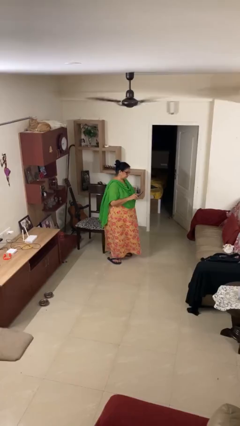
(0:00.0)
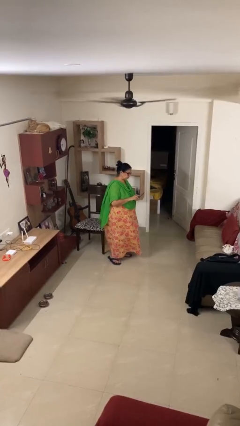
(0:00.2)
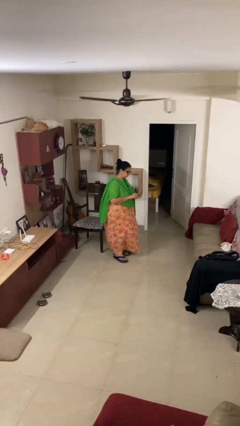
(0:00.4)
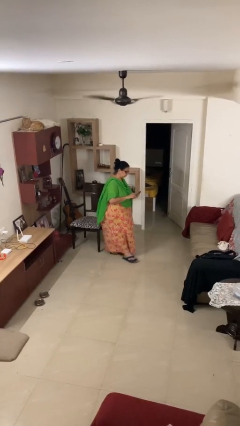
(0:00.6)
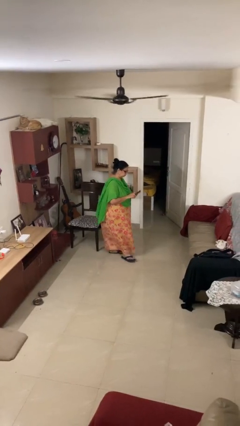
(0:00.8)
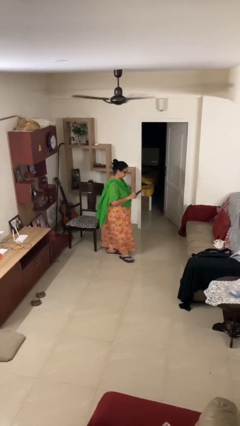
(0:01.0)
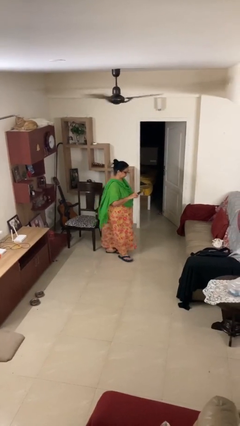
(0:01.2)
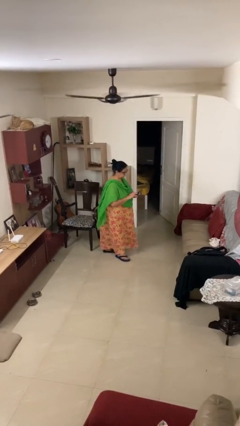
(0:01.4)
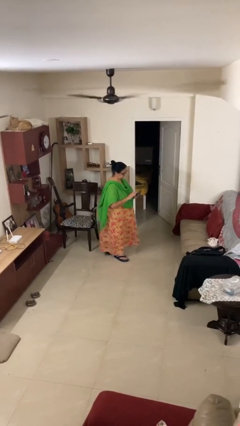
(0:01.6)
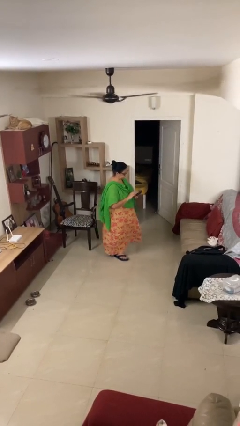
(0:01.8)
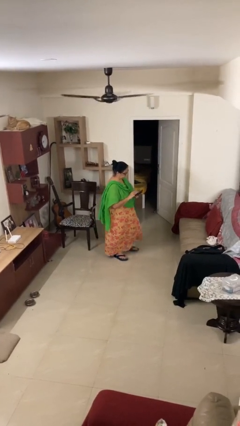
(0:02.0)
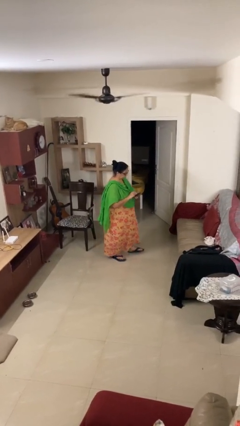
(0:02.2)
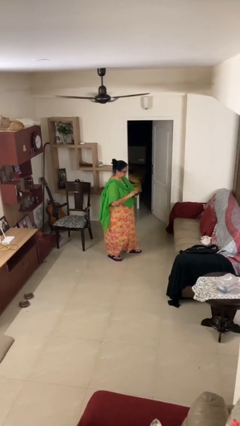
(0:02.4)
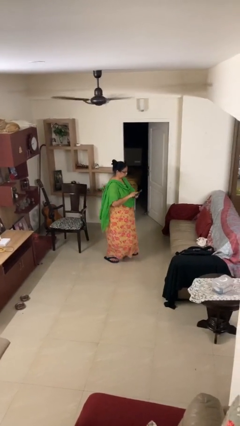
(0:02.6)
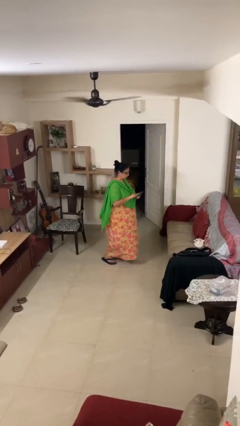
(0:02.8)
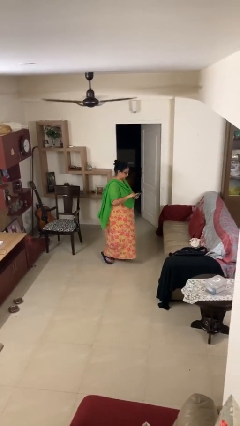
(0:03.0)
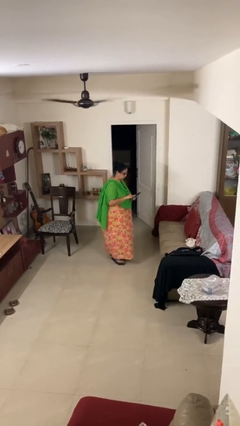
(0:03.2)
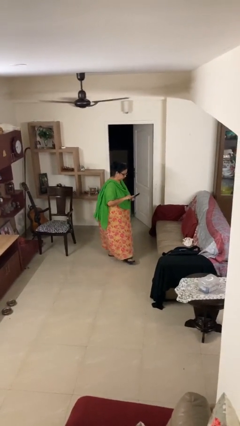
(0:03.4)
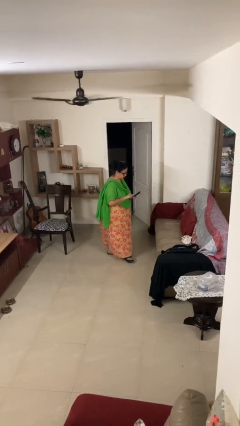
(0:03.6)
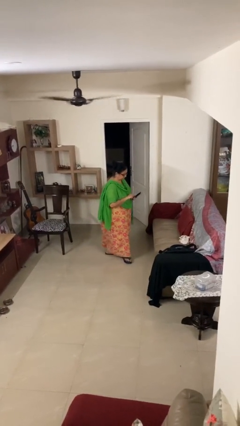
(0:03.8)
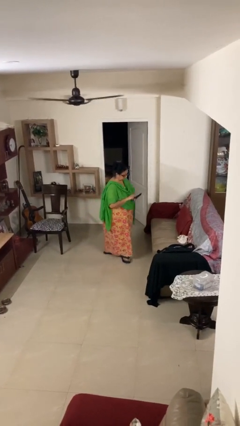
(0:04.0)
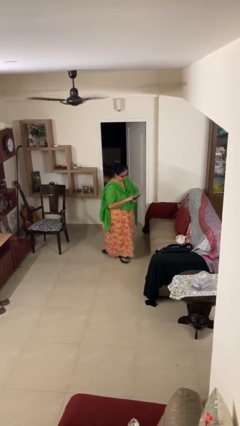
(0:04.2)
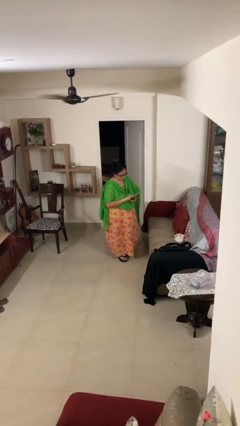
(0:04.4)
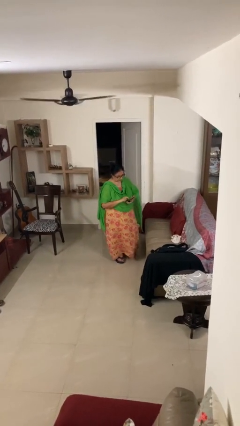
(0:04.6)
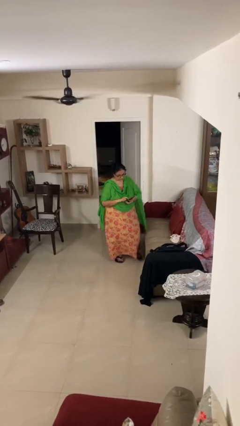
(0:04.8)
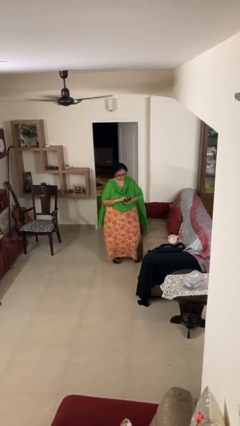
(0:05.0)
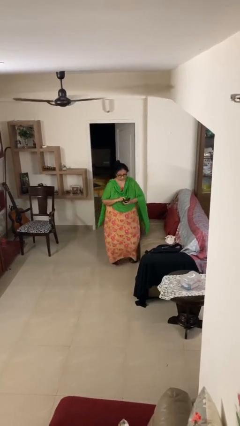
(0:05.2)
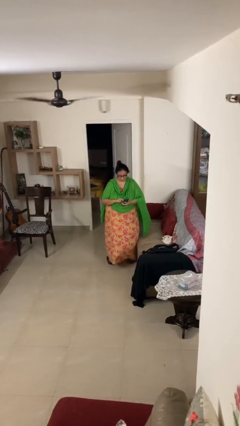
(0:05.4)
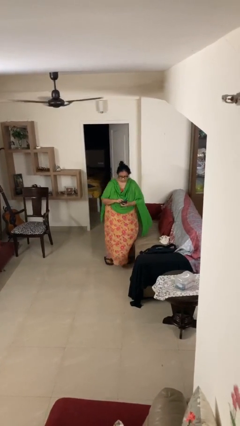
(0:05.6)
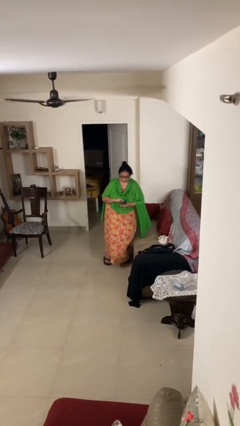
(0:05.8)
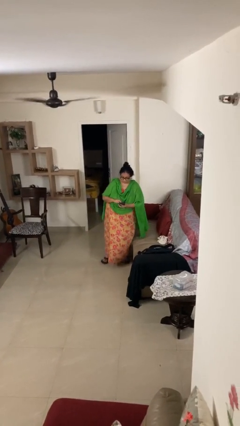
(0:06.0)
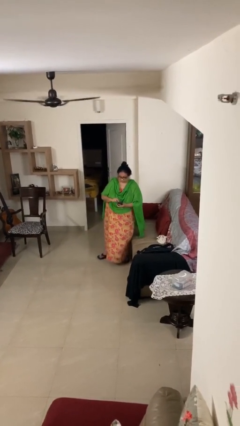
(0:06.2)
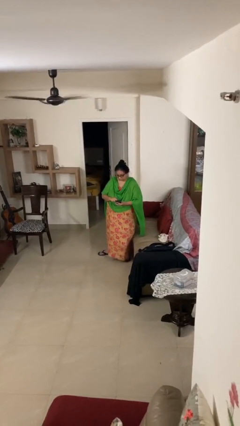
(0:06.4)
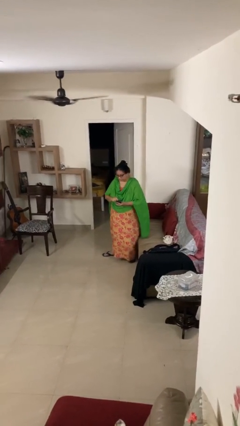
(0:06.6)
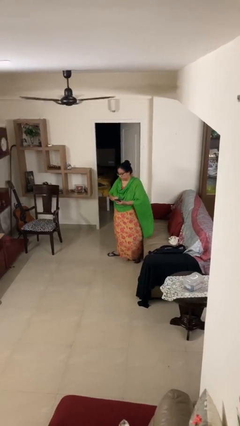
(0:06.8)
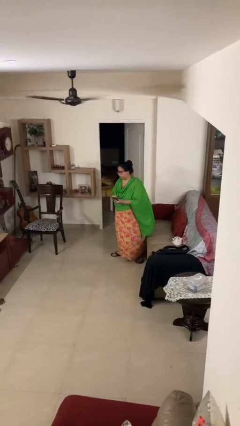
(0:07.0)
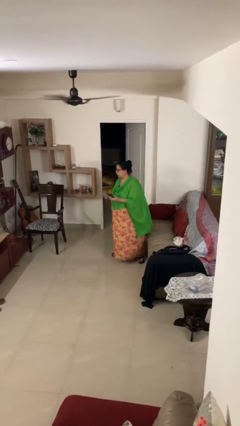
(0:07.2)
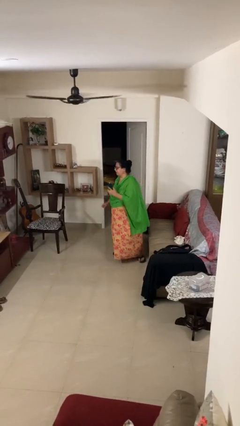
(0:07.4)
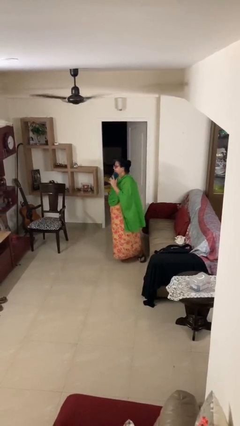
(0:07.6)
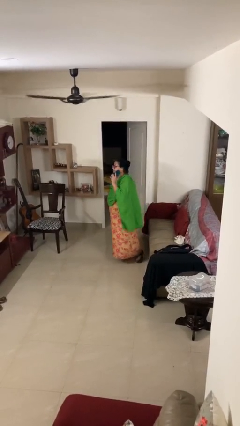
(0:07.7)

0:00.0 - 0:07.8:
person texts on phone

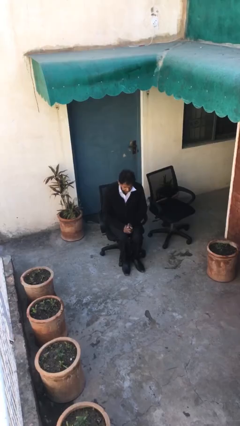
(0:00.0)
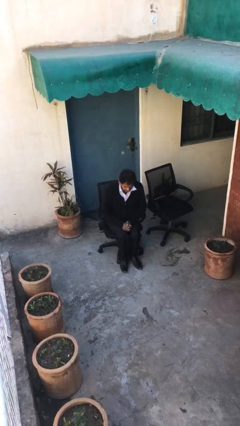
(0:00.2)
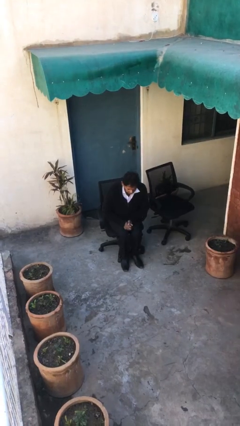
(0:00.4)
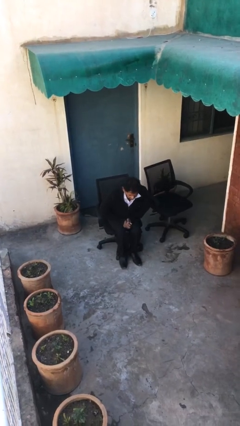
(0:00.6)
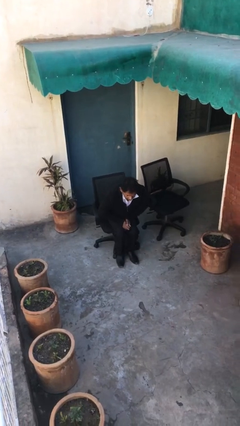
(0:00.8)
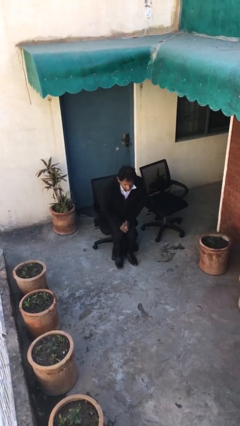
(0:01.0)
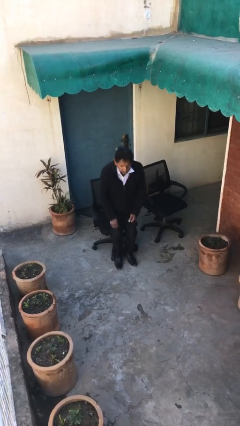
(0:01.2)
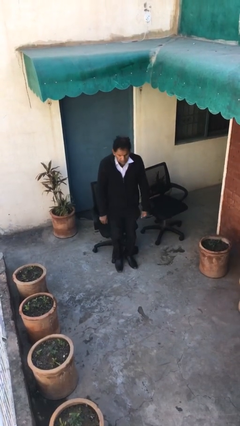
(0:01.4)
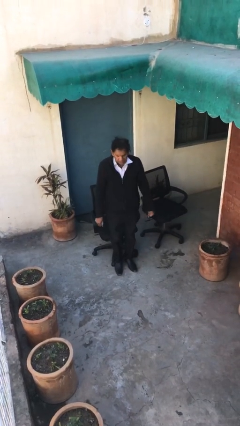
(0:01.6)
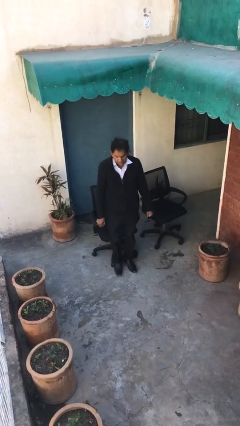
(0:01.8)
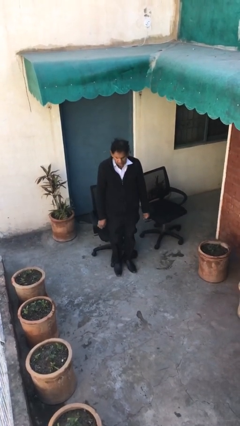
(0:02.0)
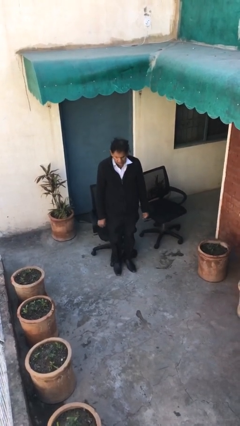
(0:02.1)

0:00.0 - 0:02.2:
person stands up

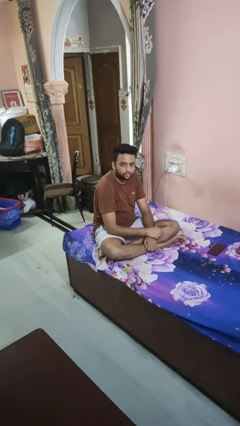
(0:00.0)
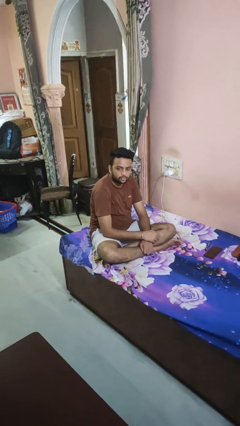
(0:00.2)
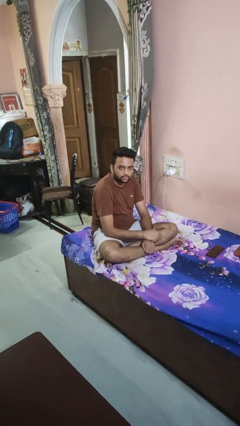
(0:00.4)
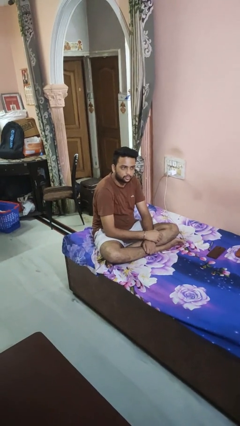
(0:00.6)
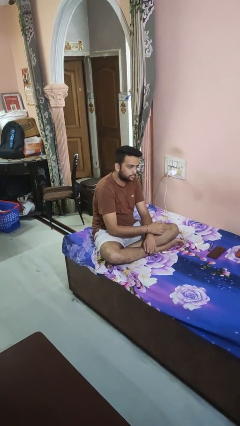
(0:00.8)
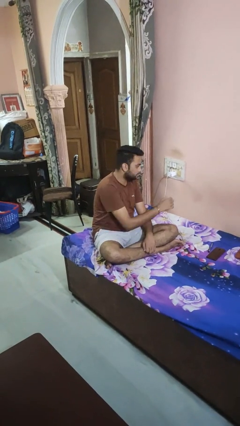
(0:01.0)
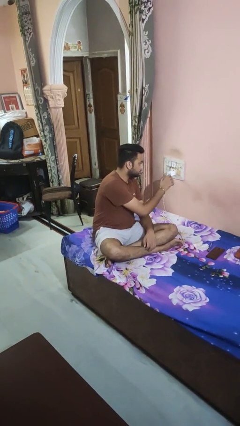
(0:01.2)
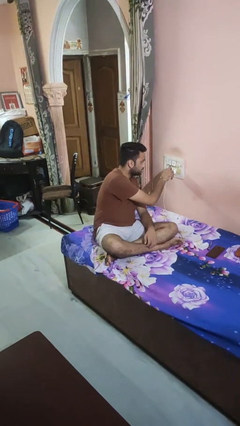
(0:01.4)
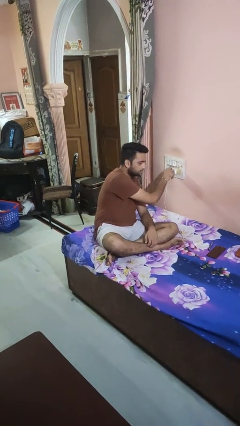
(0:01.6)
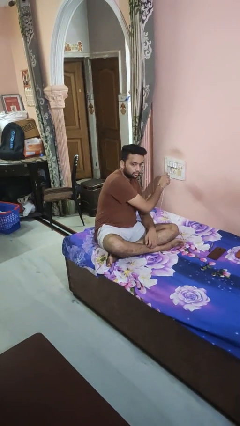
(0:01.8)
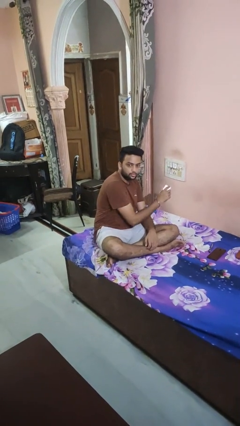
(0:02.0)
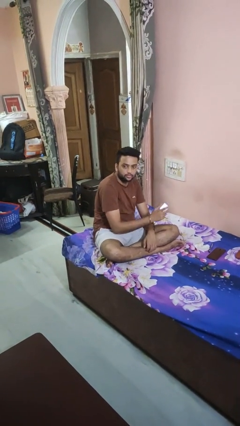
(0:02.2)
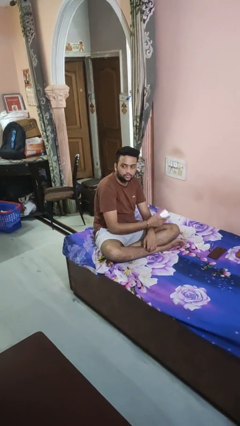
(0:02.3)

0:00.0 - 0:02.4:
person unplugs from electrical socket

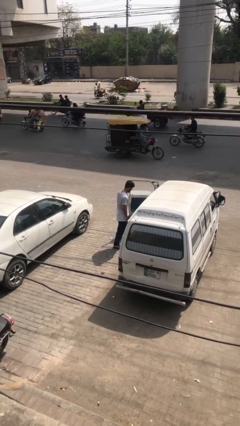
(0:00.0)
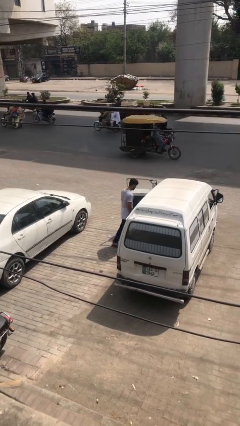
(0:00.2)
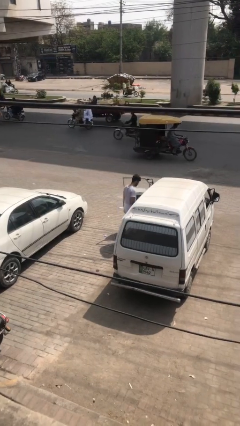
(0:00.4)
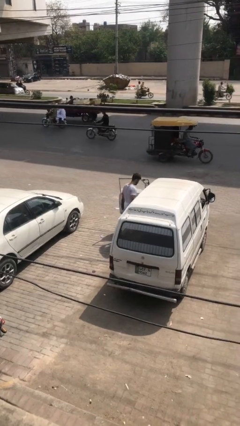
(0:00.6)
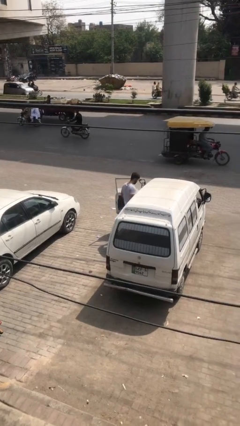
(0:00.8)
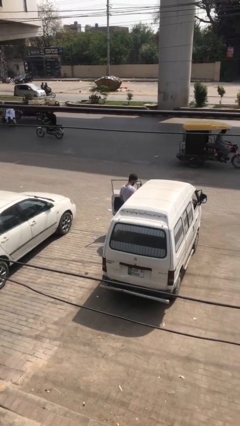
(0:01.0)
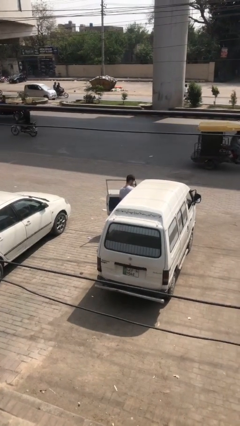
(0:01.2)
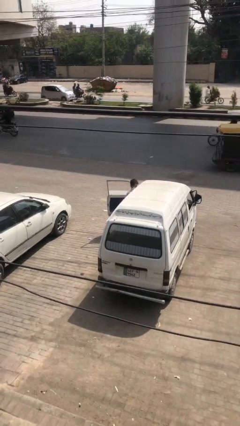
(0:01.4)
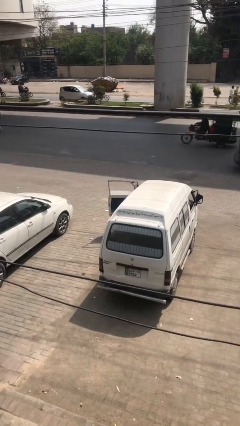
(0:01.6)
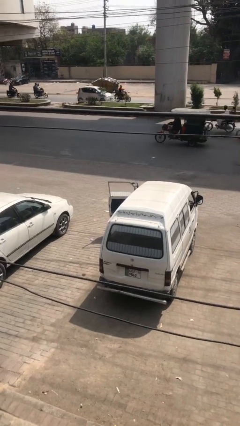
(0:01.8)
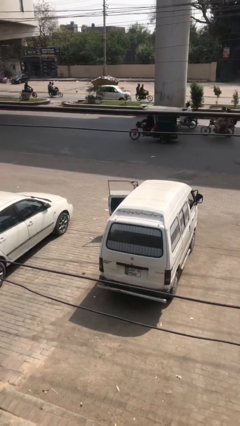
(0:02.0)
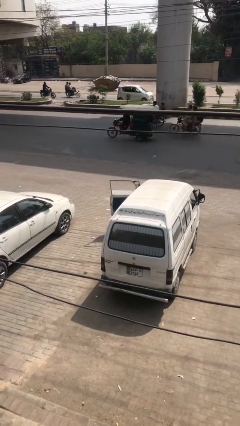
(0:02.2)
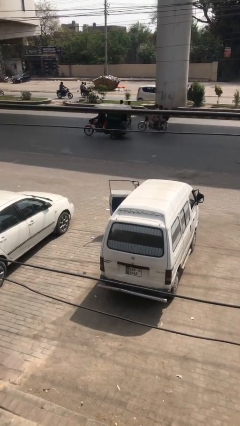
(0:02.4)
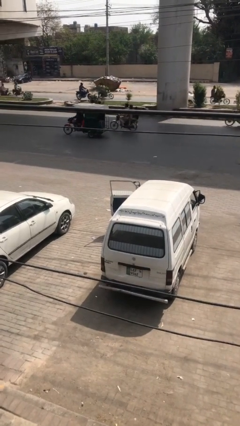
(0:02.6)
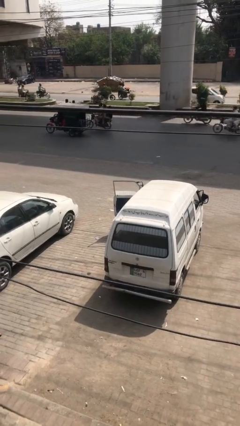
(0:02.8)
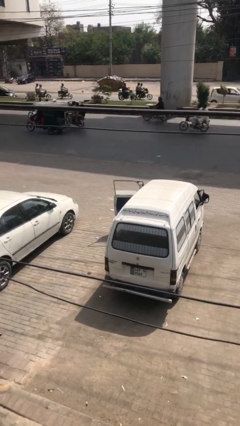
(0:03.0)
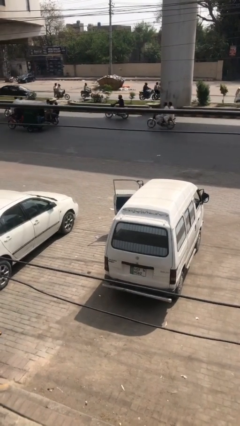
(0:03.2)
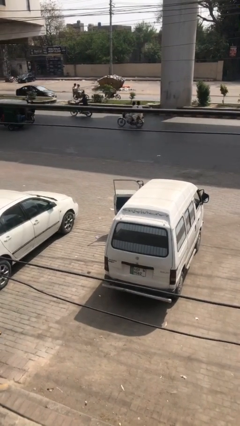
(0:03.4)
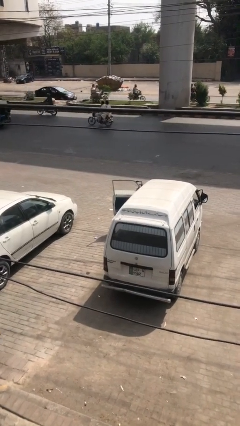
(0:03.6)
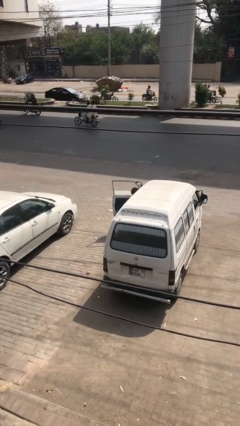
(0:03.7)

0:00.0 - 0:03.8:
person enters car

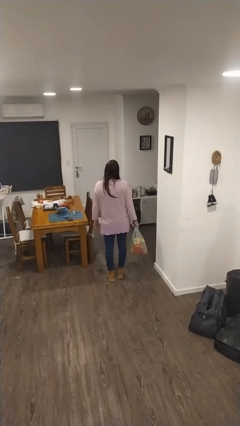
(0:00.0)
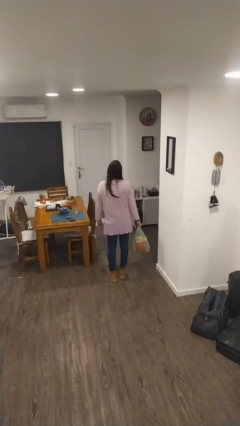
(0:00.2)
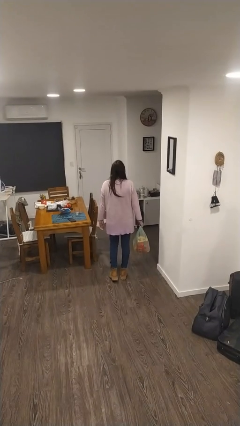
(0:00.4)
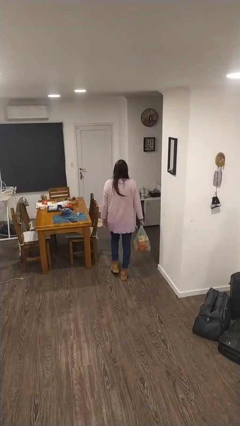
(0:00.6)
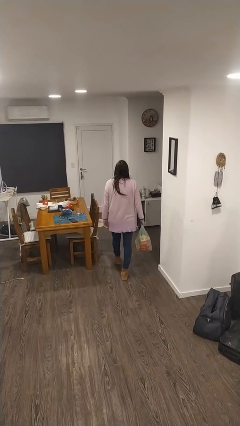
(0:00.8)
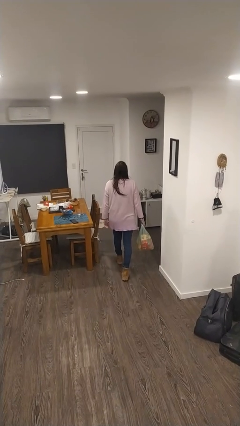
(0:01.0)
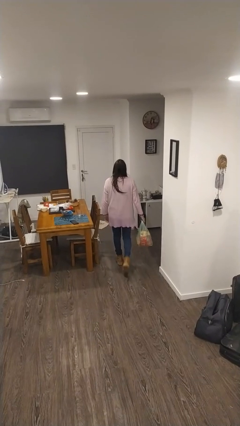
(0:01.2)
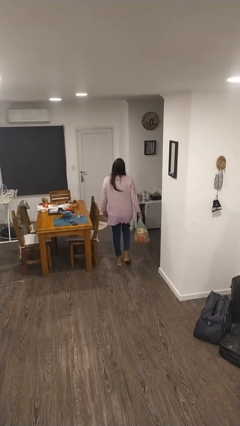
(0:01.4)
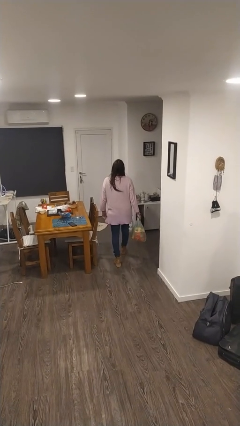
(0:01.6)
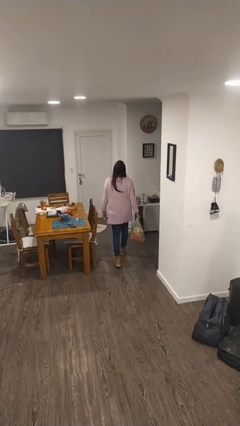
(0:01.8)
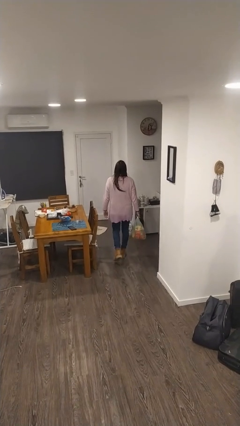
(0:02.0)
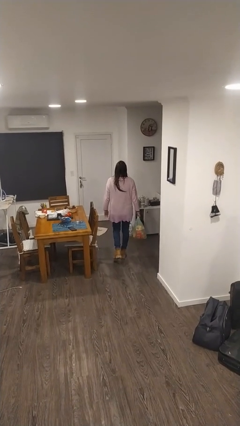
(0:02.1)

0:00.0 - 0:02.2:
person carries groceries
